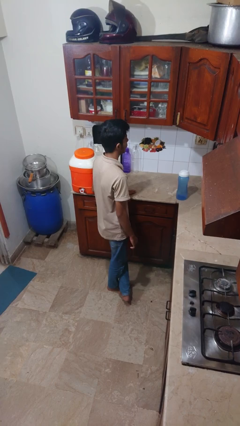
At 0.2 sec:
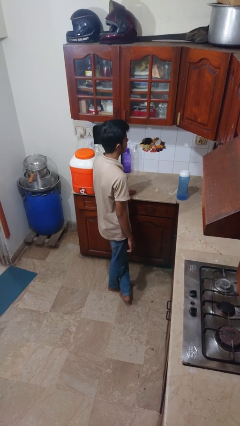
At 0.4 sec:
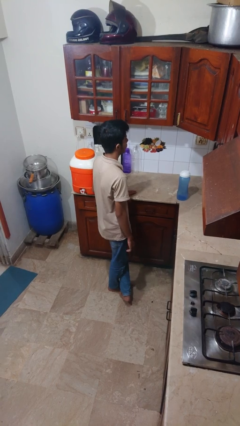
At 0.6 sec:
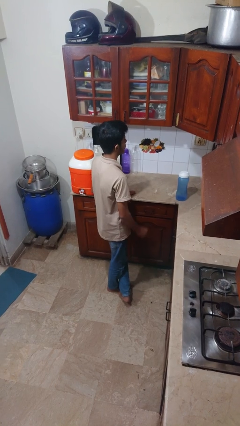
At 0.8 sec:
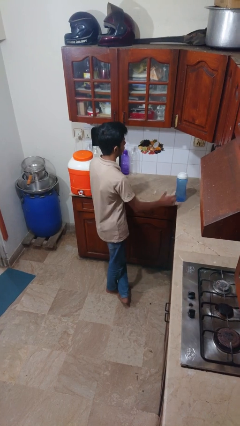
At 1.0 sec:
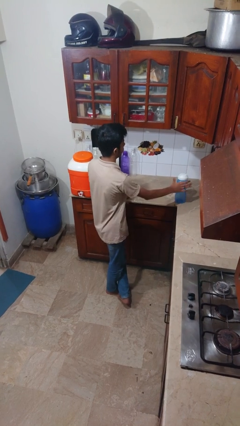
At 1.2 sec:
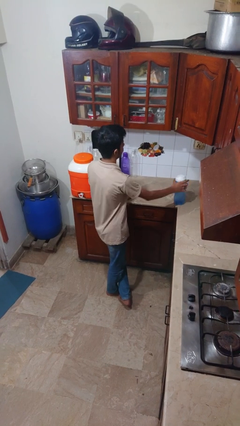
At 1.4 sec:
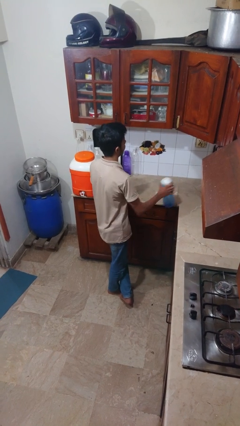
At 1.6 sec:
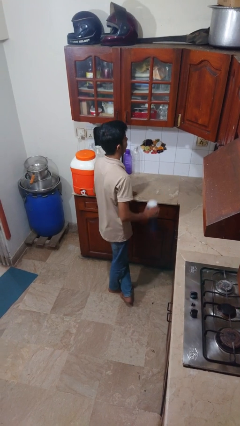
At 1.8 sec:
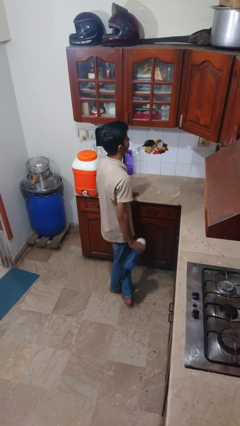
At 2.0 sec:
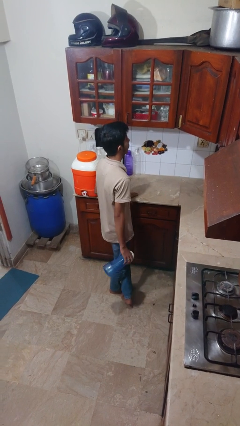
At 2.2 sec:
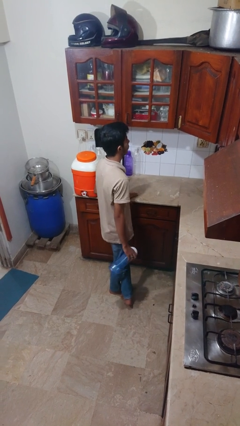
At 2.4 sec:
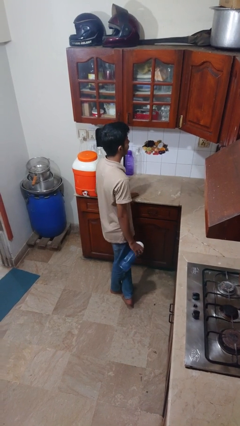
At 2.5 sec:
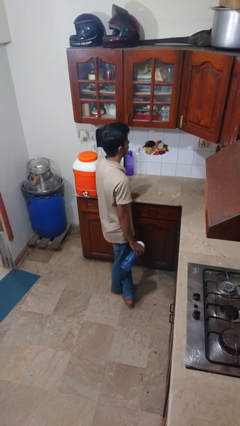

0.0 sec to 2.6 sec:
person picks up object from countertop

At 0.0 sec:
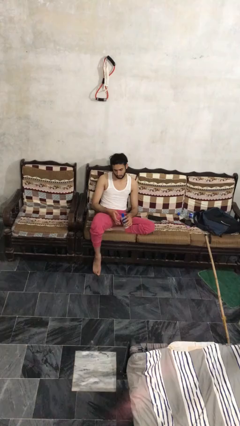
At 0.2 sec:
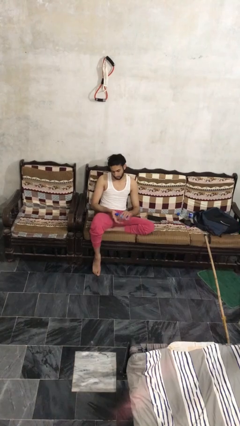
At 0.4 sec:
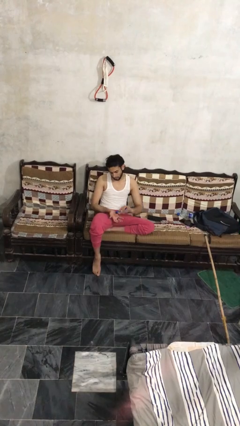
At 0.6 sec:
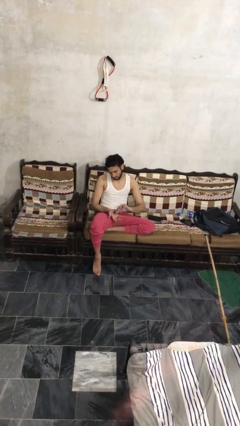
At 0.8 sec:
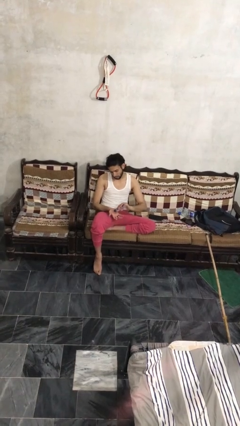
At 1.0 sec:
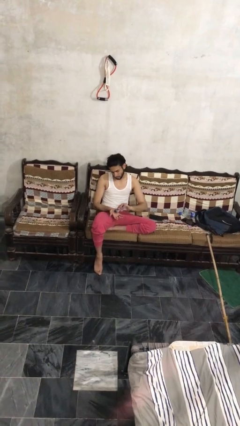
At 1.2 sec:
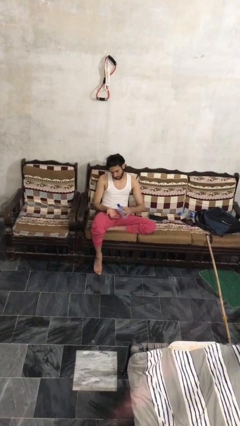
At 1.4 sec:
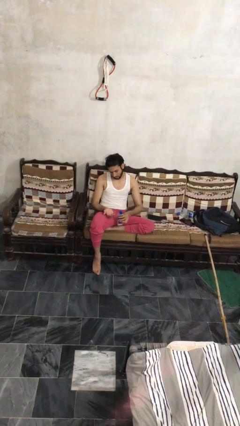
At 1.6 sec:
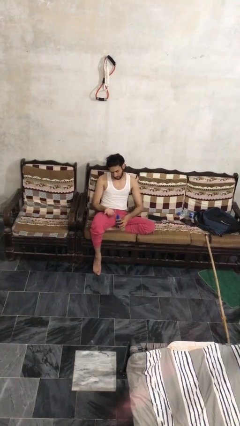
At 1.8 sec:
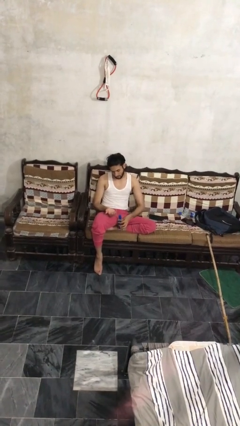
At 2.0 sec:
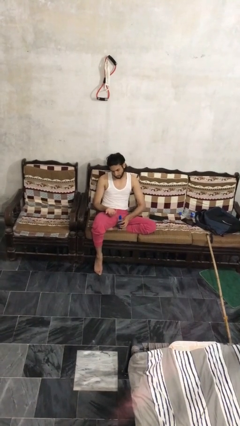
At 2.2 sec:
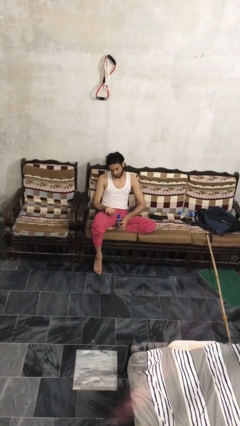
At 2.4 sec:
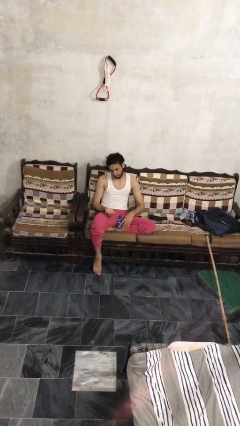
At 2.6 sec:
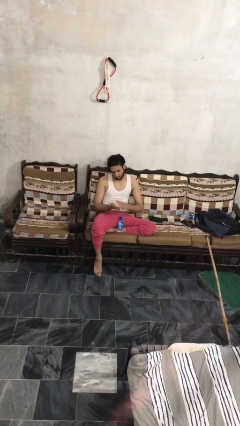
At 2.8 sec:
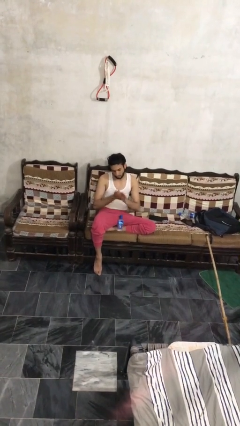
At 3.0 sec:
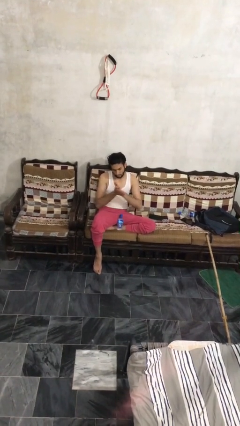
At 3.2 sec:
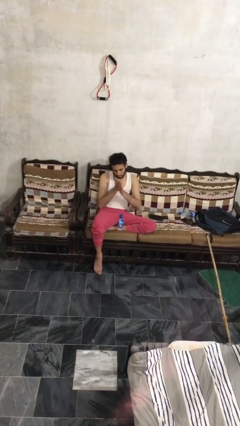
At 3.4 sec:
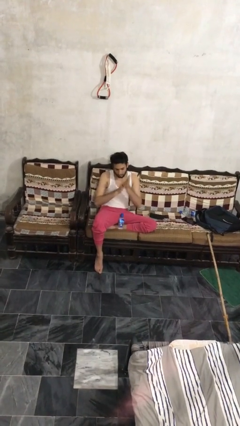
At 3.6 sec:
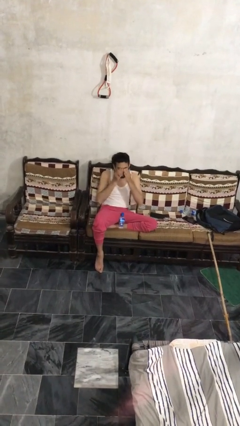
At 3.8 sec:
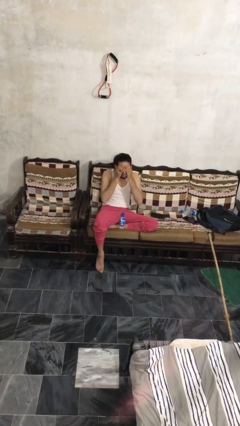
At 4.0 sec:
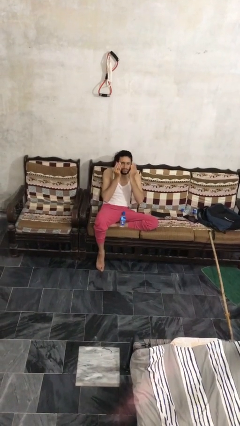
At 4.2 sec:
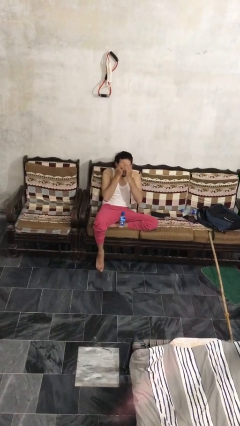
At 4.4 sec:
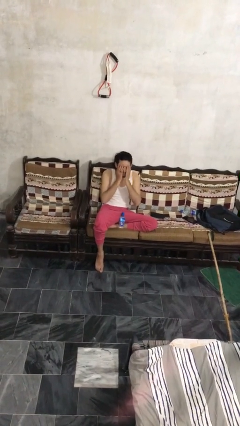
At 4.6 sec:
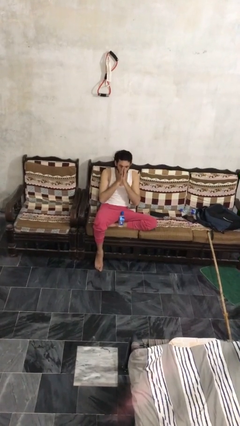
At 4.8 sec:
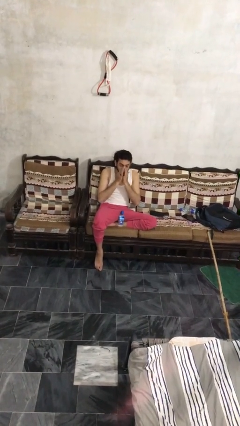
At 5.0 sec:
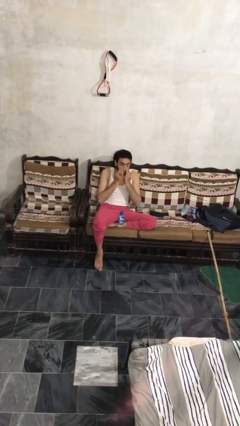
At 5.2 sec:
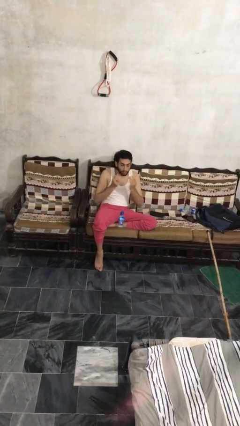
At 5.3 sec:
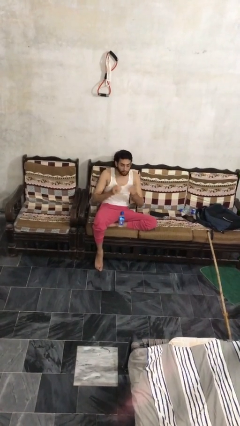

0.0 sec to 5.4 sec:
person applies facial moisturizer

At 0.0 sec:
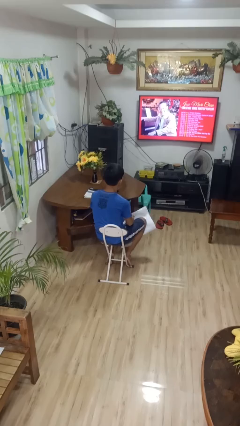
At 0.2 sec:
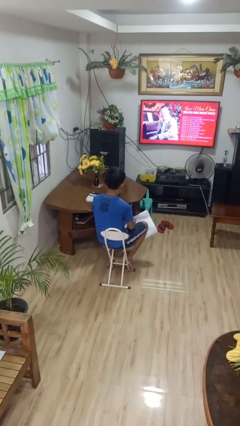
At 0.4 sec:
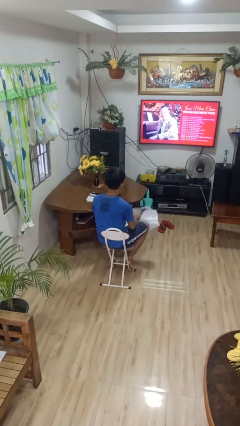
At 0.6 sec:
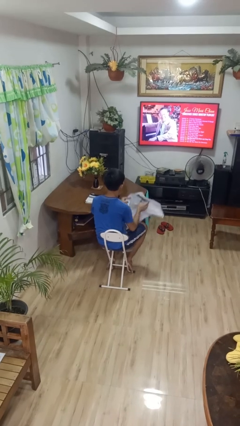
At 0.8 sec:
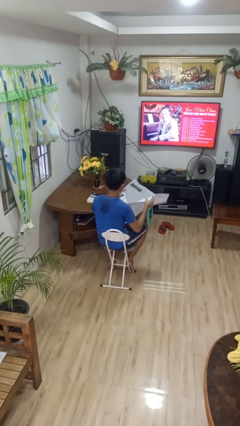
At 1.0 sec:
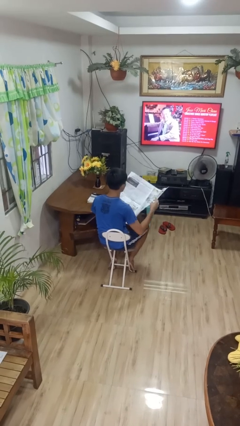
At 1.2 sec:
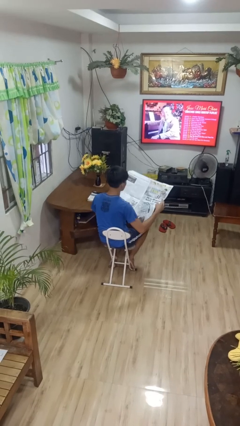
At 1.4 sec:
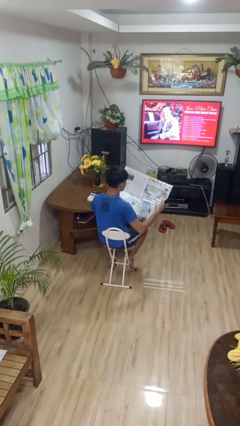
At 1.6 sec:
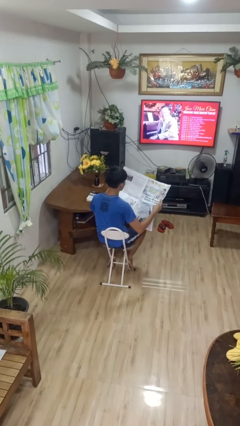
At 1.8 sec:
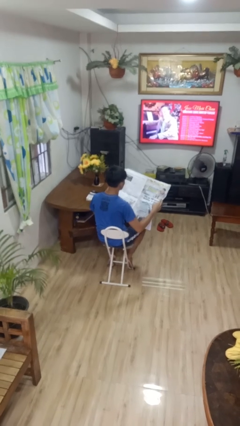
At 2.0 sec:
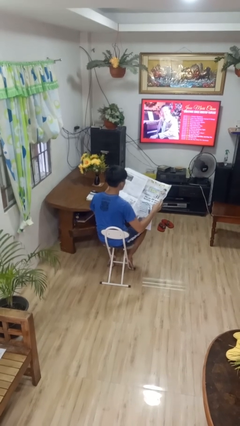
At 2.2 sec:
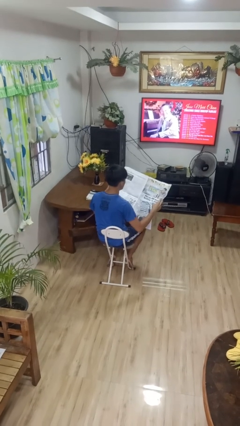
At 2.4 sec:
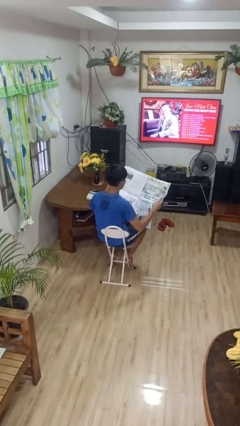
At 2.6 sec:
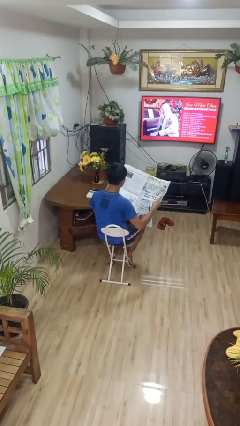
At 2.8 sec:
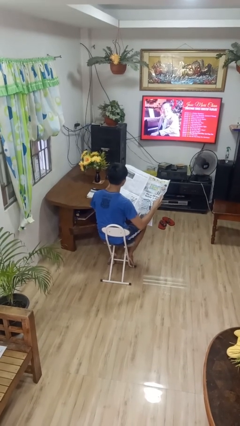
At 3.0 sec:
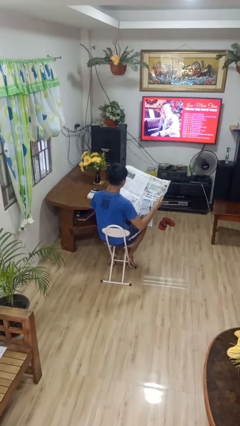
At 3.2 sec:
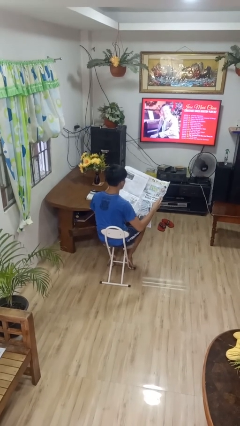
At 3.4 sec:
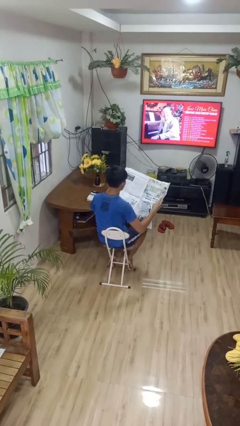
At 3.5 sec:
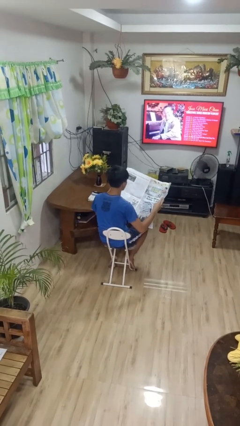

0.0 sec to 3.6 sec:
person reads newspaper

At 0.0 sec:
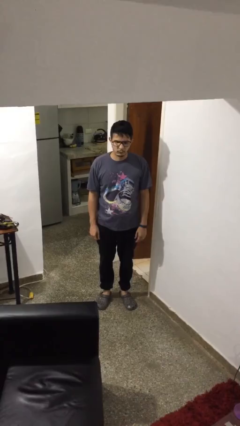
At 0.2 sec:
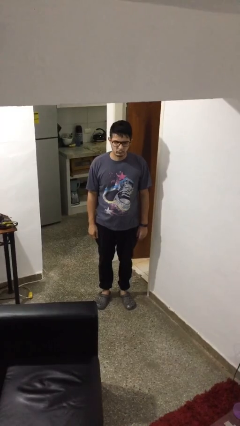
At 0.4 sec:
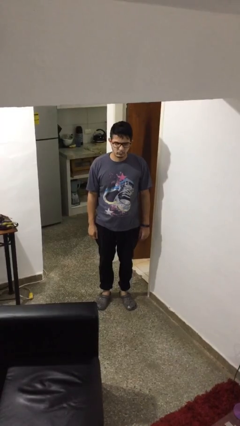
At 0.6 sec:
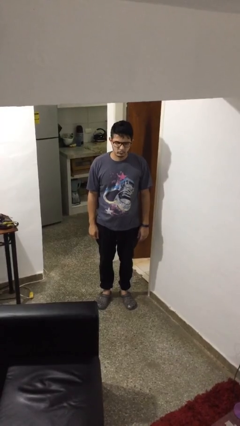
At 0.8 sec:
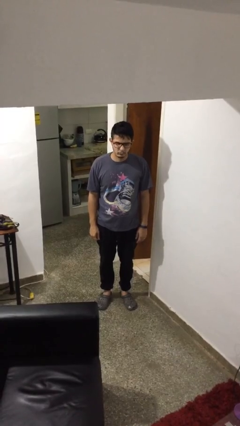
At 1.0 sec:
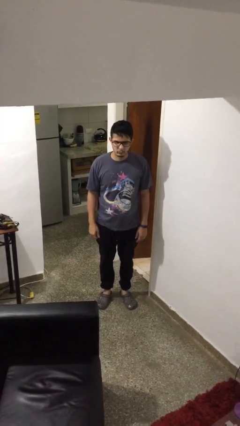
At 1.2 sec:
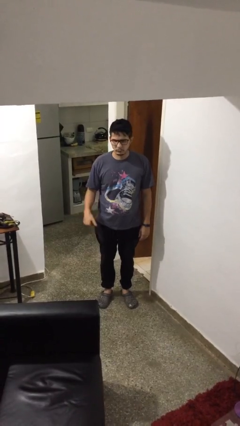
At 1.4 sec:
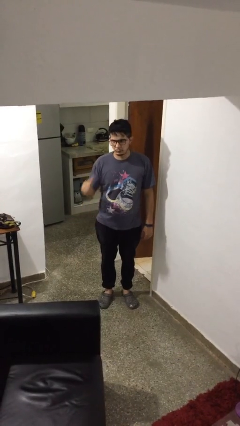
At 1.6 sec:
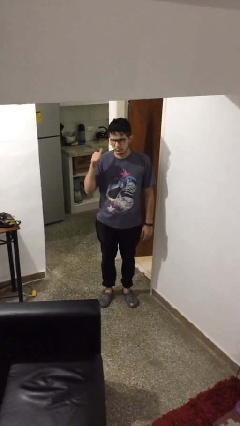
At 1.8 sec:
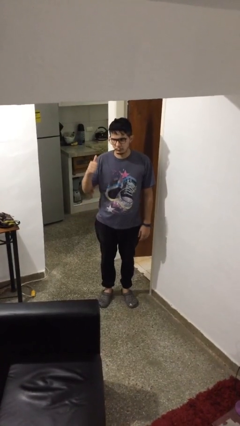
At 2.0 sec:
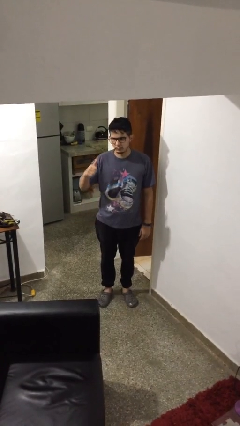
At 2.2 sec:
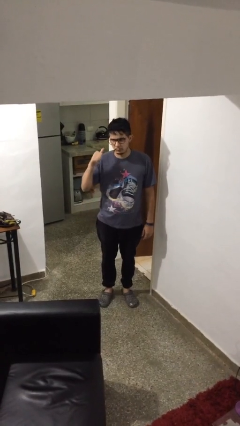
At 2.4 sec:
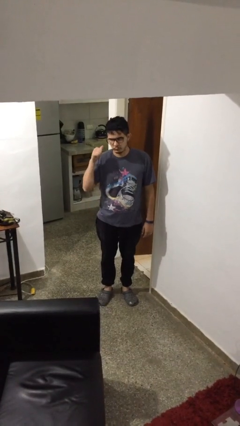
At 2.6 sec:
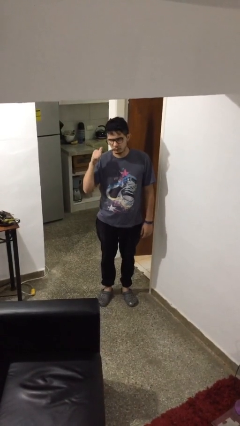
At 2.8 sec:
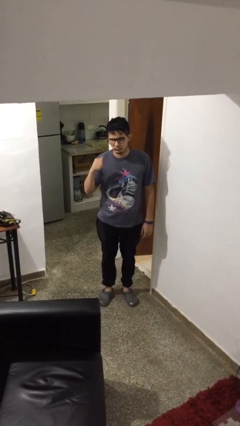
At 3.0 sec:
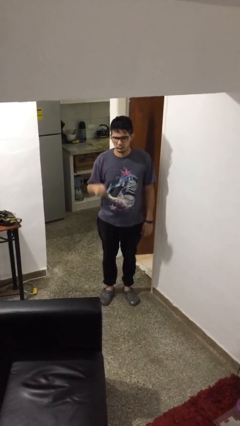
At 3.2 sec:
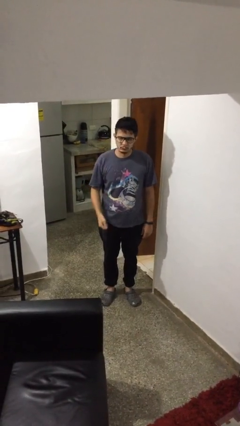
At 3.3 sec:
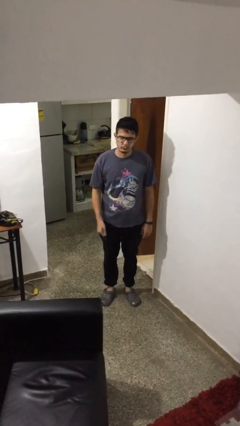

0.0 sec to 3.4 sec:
person gestures behind me

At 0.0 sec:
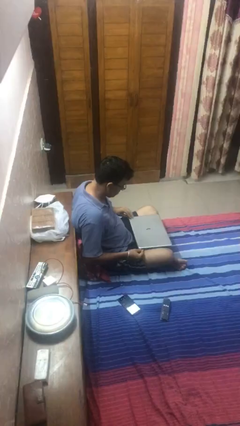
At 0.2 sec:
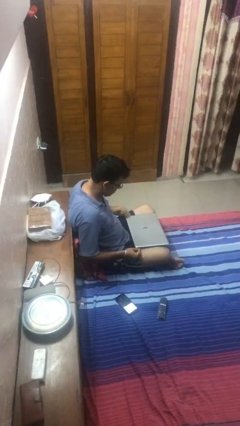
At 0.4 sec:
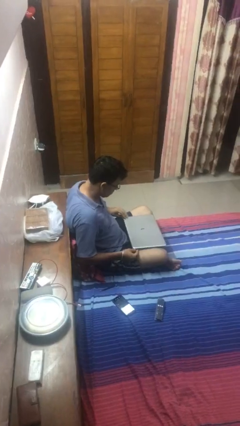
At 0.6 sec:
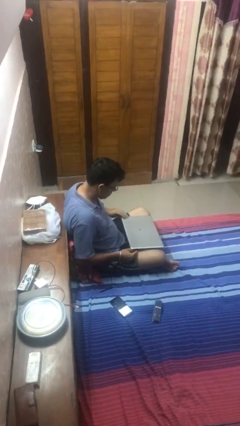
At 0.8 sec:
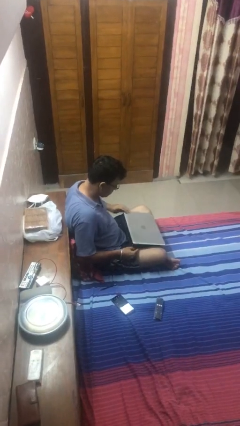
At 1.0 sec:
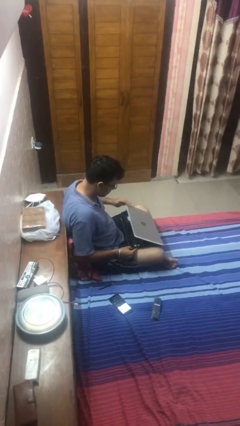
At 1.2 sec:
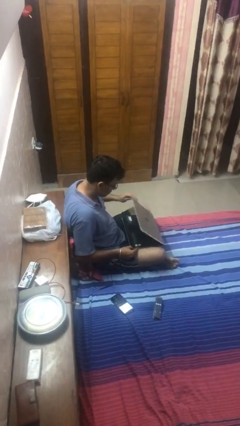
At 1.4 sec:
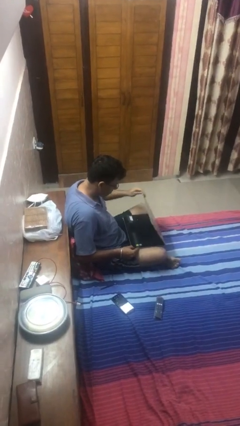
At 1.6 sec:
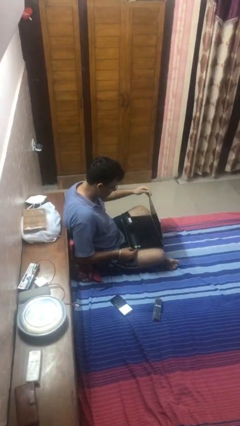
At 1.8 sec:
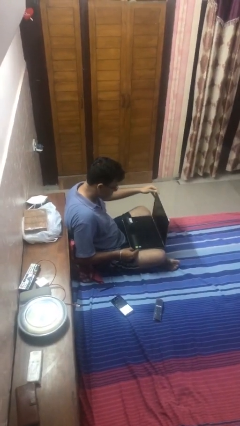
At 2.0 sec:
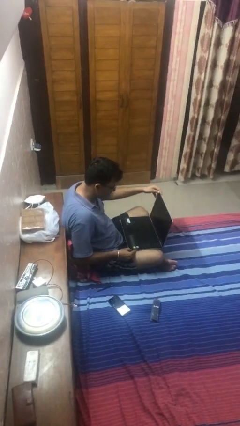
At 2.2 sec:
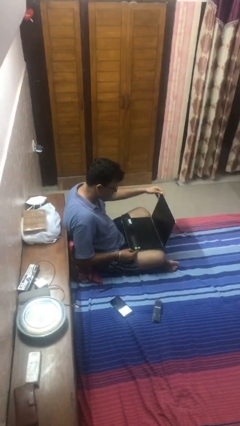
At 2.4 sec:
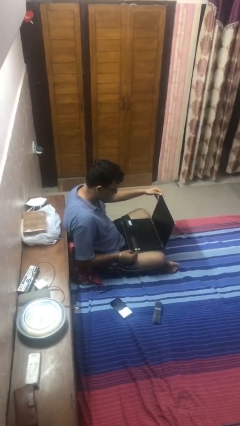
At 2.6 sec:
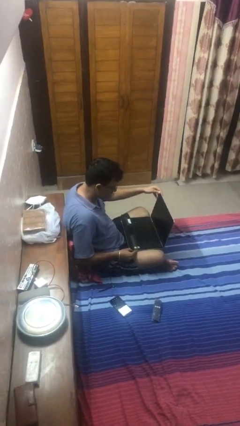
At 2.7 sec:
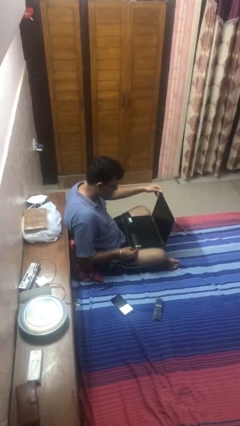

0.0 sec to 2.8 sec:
person opens laptop
